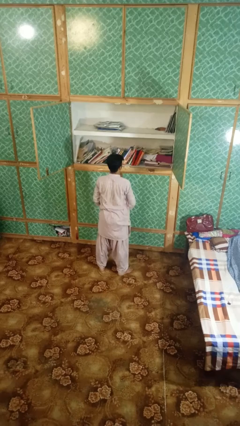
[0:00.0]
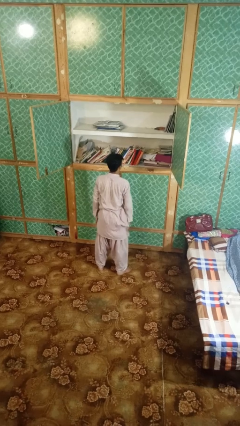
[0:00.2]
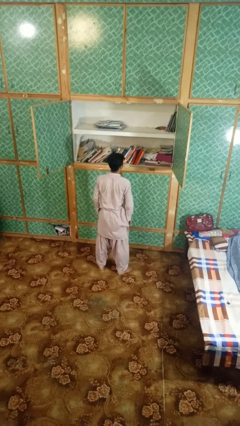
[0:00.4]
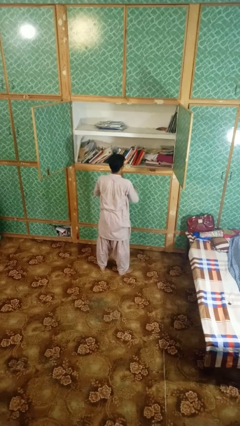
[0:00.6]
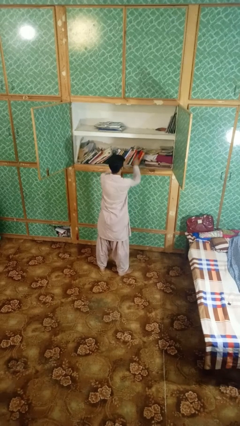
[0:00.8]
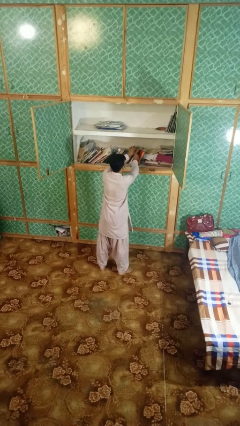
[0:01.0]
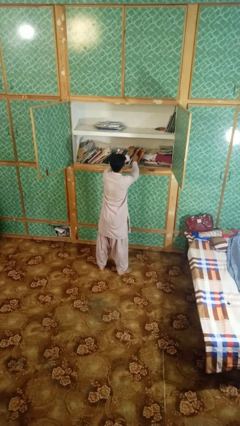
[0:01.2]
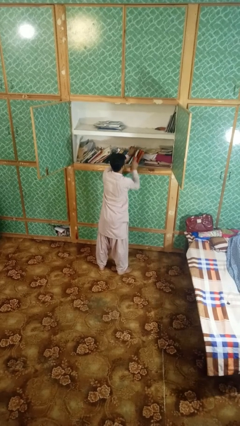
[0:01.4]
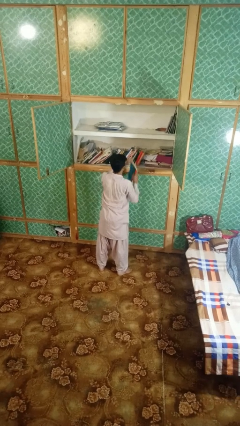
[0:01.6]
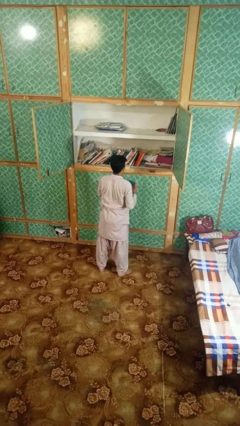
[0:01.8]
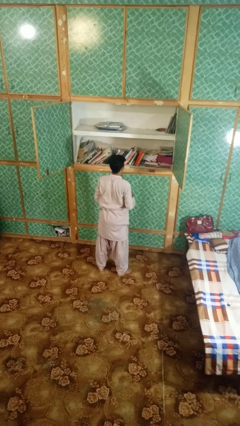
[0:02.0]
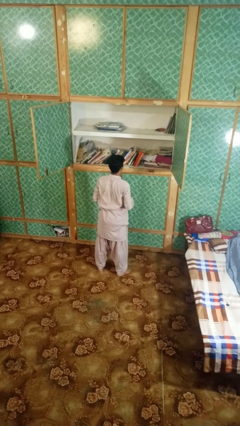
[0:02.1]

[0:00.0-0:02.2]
person picks up object from shelf

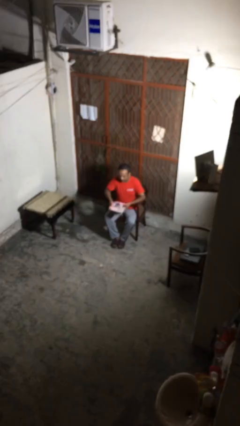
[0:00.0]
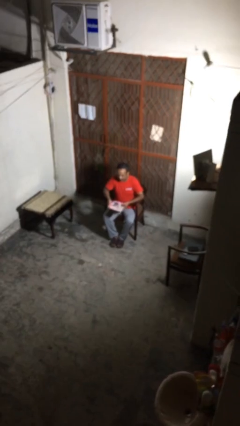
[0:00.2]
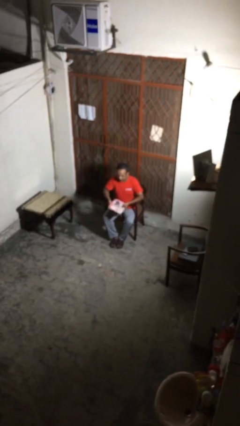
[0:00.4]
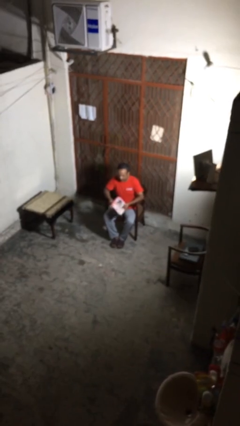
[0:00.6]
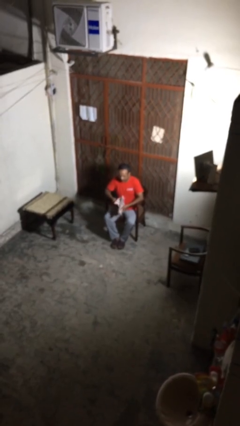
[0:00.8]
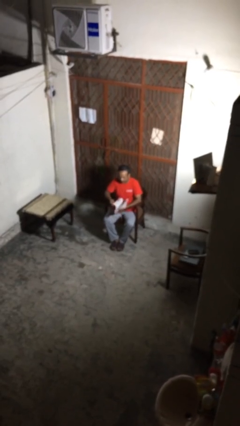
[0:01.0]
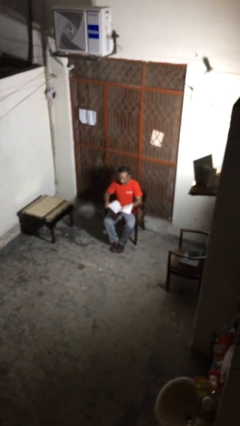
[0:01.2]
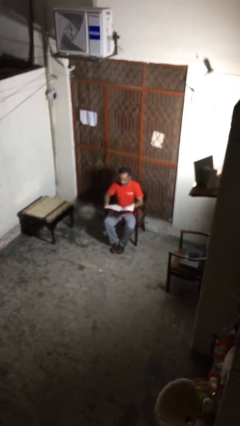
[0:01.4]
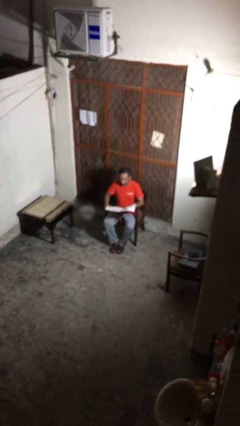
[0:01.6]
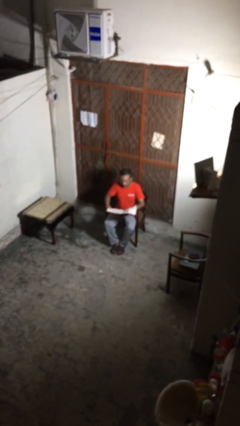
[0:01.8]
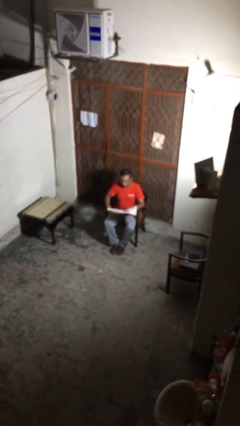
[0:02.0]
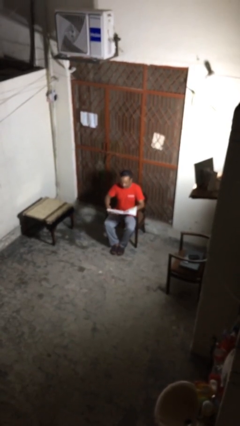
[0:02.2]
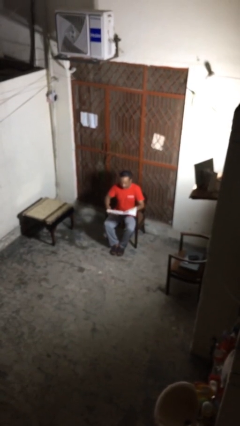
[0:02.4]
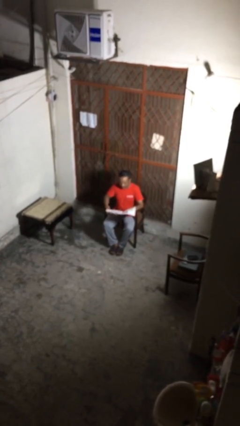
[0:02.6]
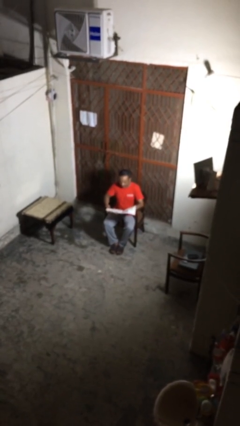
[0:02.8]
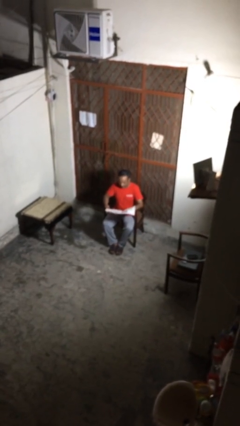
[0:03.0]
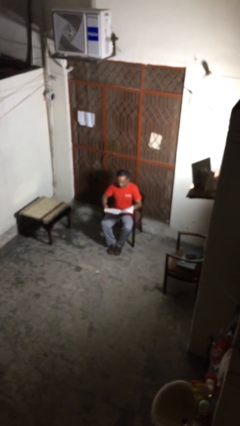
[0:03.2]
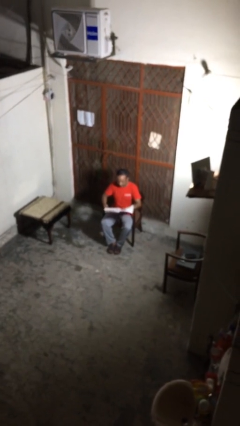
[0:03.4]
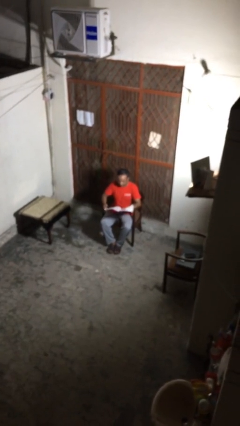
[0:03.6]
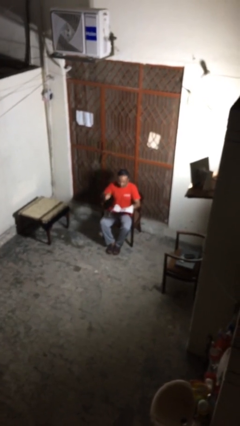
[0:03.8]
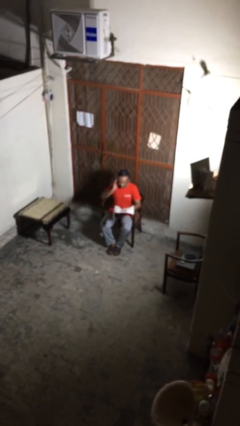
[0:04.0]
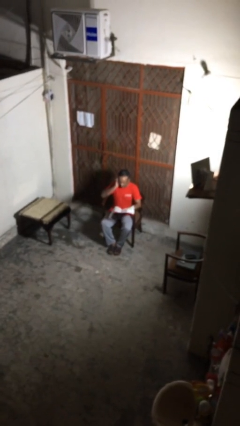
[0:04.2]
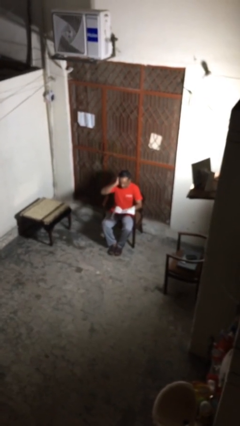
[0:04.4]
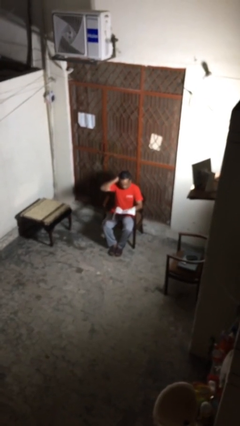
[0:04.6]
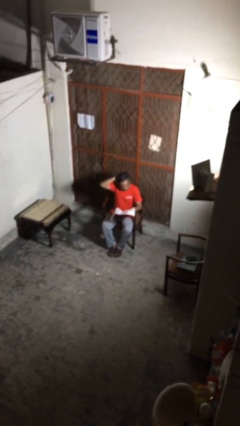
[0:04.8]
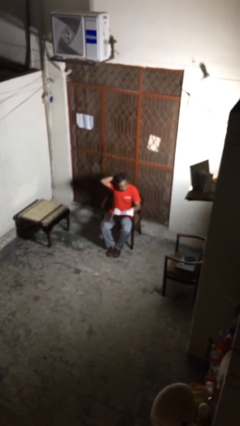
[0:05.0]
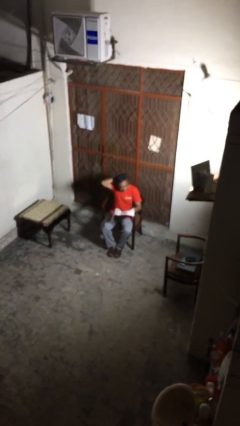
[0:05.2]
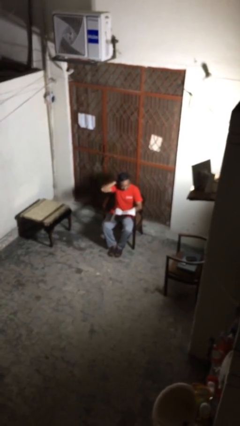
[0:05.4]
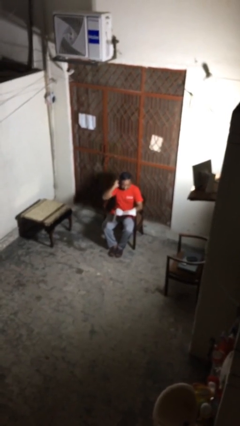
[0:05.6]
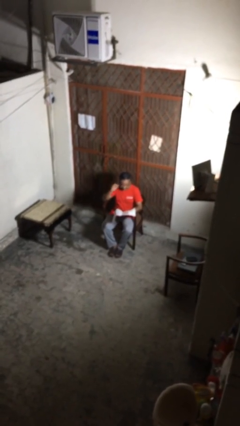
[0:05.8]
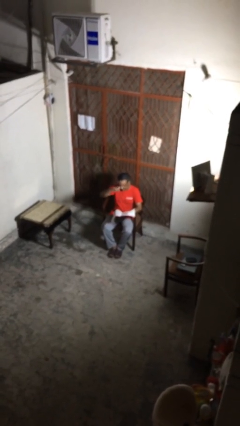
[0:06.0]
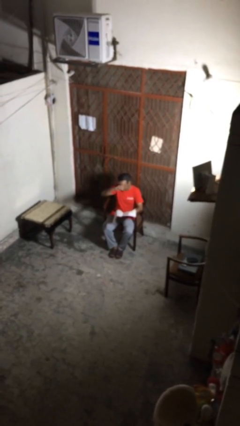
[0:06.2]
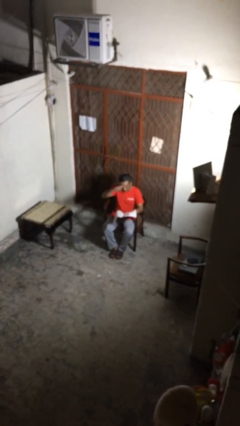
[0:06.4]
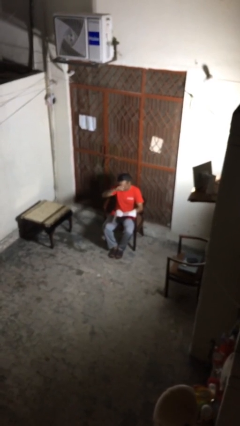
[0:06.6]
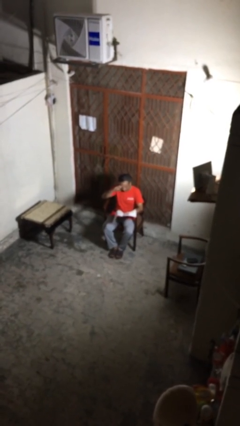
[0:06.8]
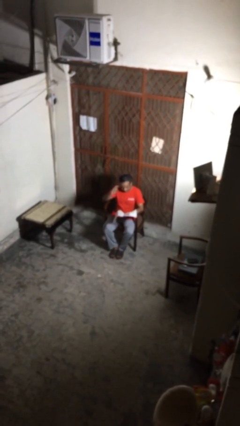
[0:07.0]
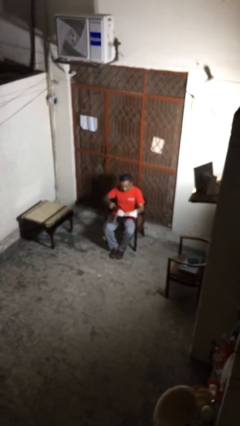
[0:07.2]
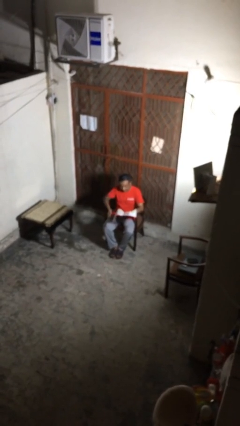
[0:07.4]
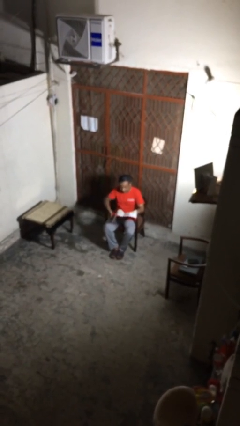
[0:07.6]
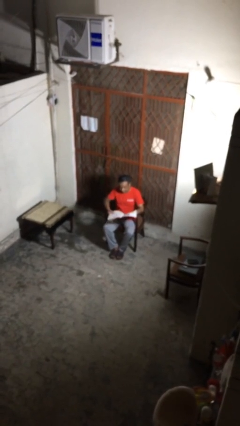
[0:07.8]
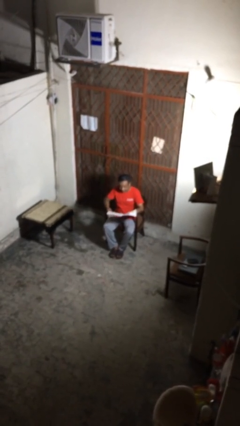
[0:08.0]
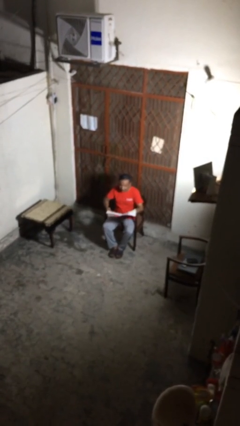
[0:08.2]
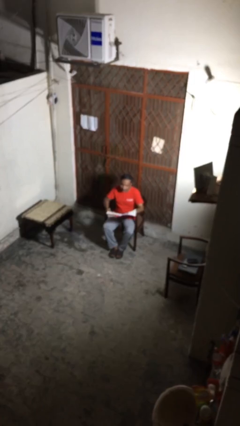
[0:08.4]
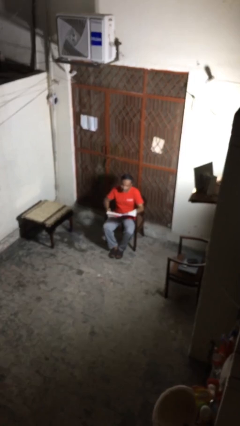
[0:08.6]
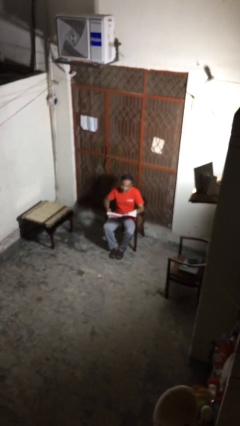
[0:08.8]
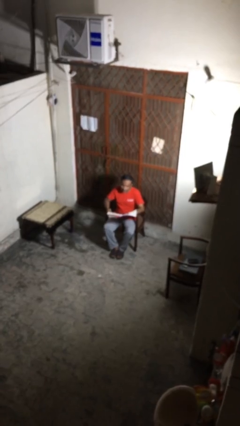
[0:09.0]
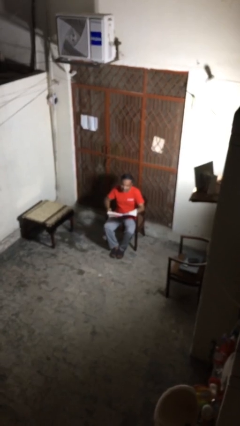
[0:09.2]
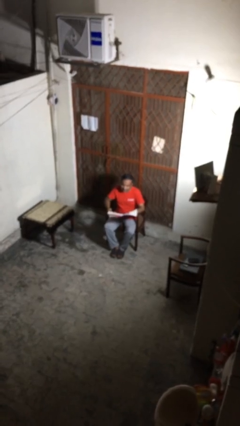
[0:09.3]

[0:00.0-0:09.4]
person reads document

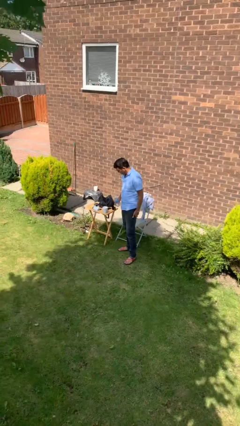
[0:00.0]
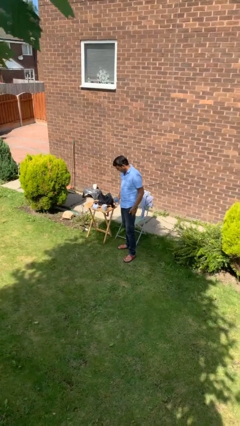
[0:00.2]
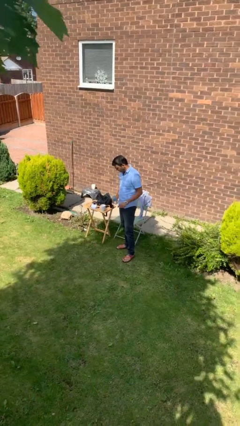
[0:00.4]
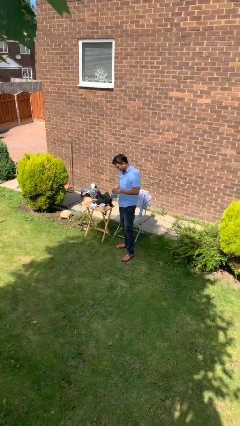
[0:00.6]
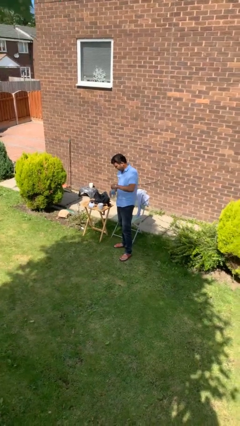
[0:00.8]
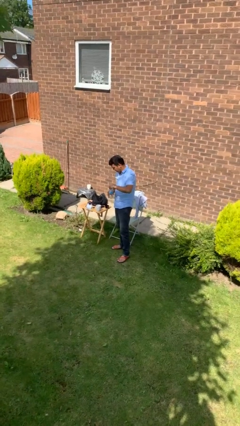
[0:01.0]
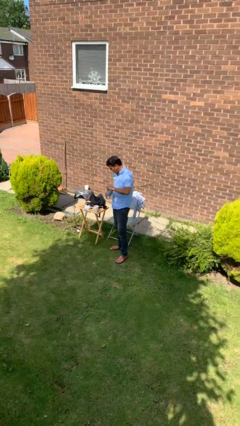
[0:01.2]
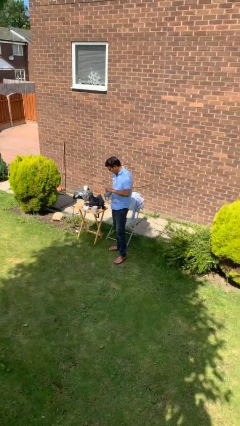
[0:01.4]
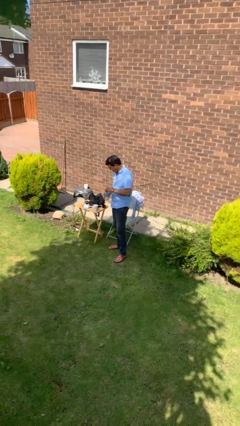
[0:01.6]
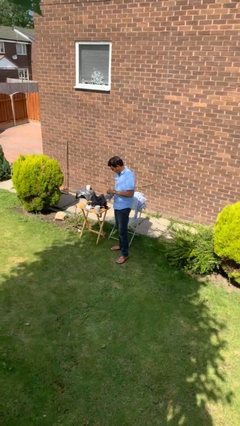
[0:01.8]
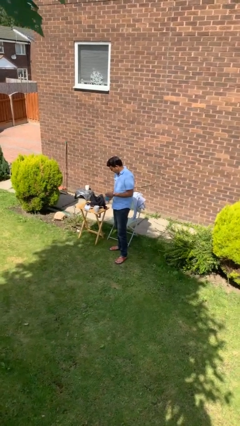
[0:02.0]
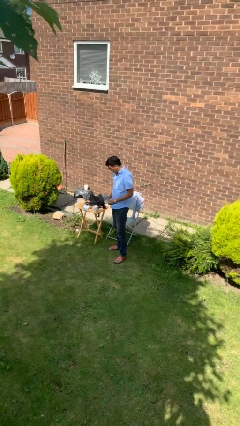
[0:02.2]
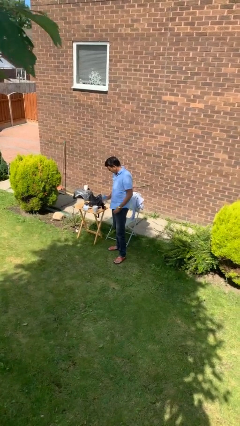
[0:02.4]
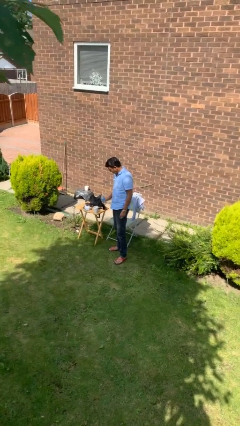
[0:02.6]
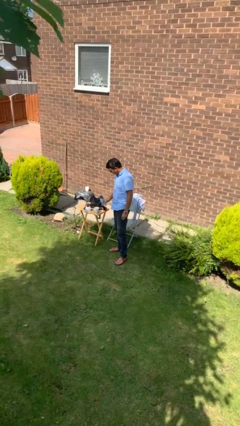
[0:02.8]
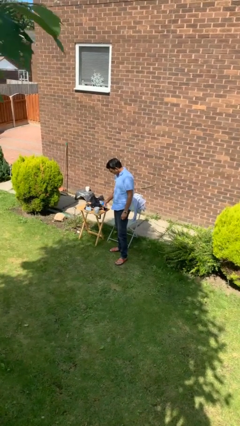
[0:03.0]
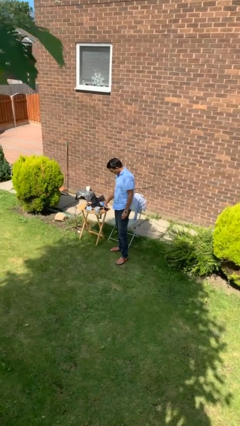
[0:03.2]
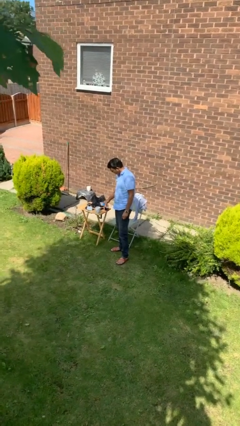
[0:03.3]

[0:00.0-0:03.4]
person unscrews lid from bottle

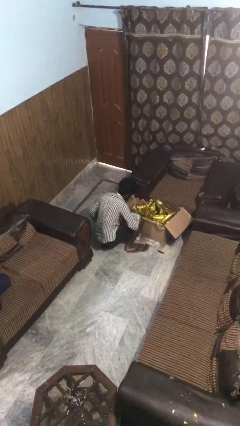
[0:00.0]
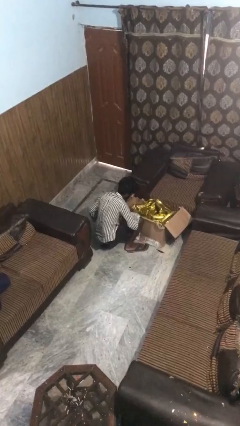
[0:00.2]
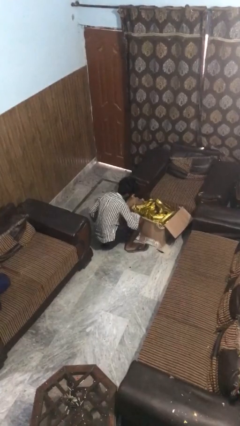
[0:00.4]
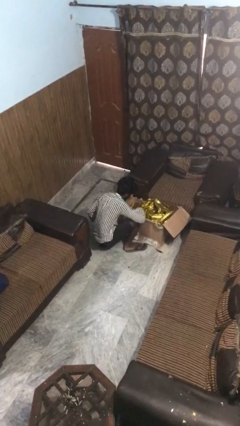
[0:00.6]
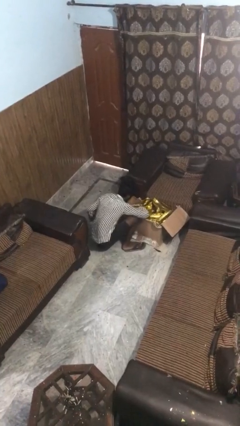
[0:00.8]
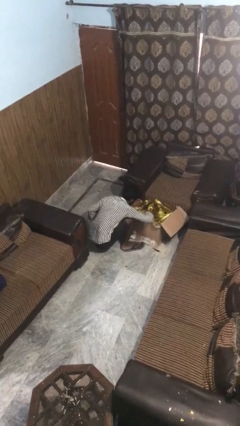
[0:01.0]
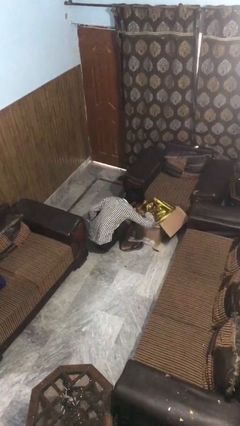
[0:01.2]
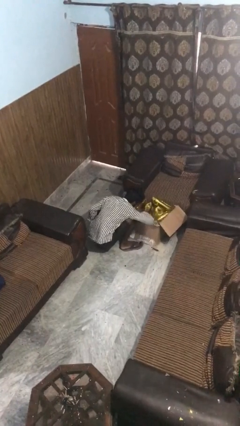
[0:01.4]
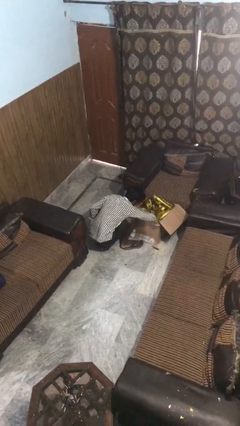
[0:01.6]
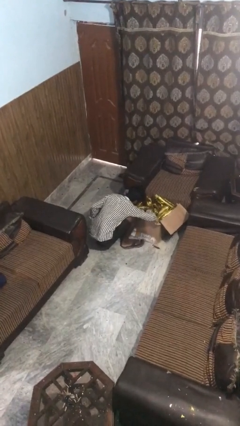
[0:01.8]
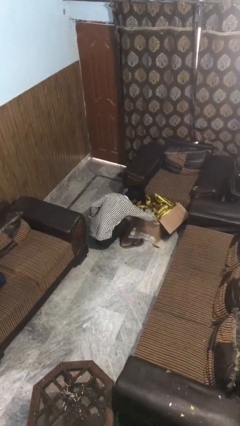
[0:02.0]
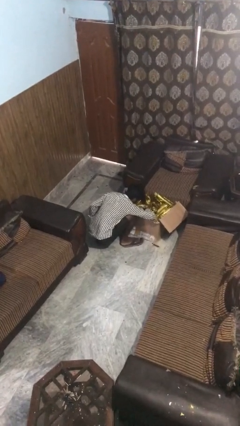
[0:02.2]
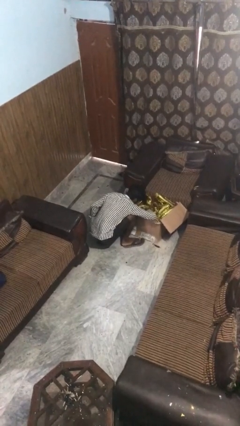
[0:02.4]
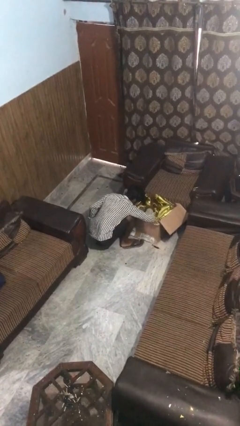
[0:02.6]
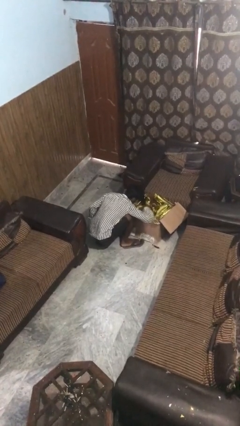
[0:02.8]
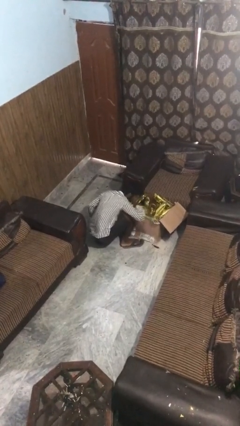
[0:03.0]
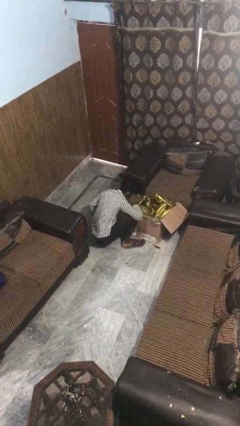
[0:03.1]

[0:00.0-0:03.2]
person searches in box
